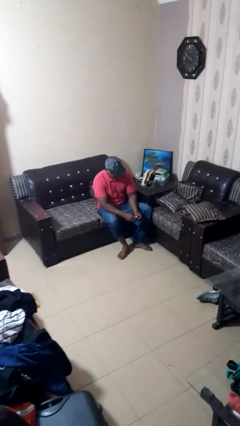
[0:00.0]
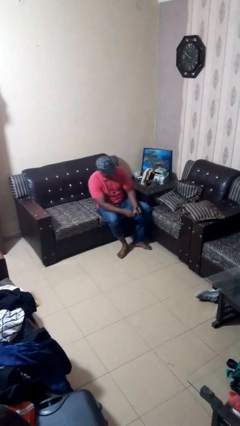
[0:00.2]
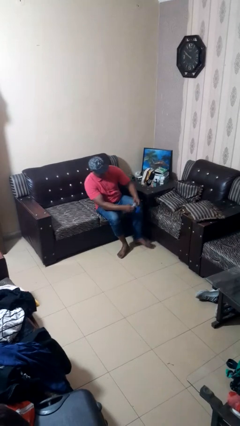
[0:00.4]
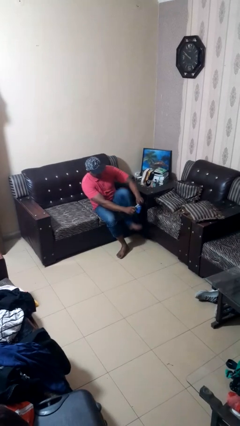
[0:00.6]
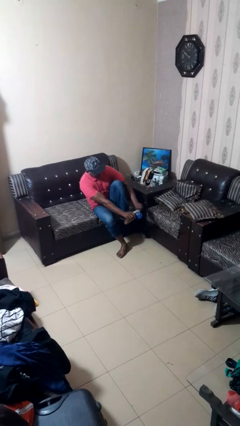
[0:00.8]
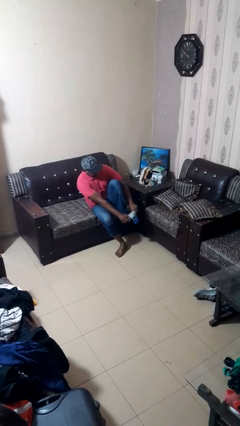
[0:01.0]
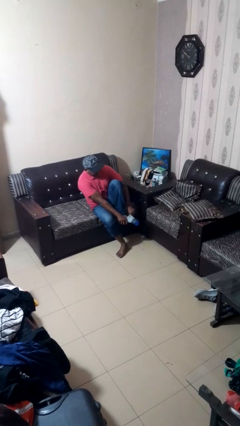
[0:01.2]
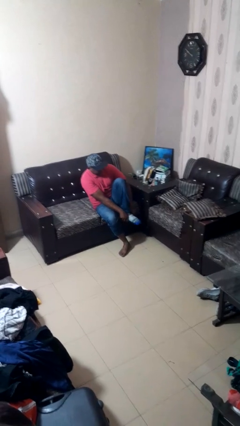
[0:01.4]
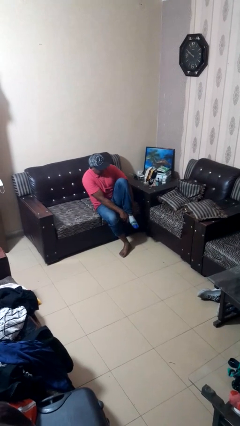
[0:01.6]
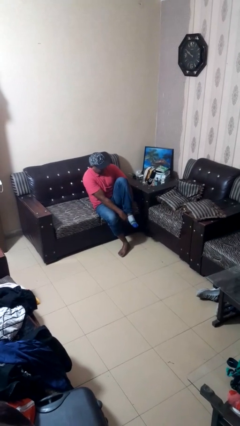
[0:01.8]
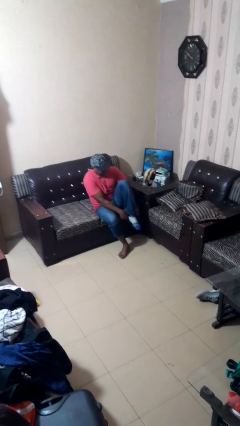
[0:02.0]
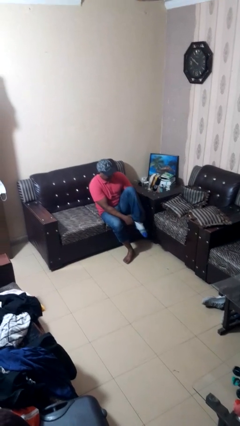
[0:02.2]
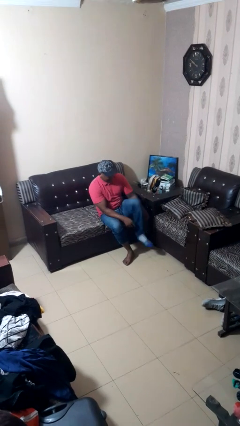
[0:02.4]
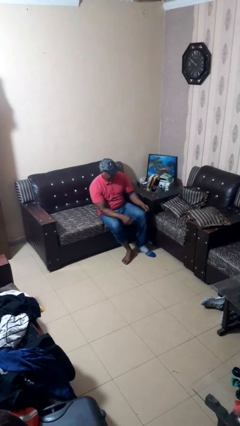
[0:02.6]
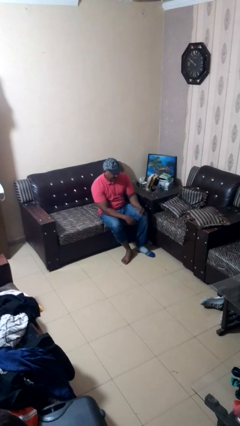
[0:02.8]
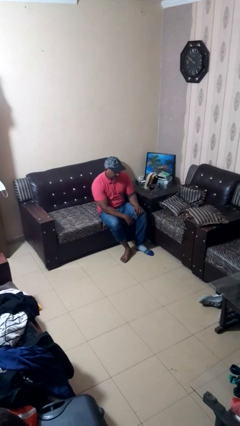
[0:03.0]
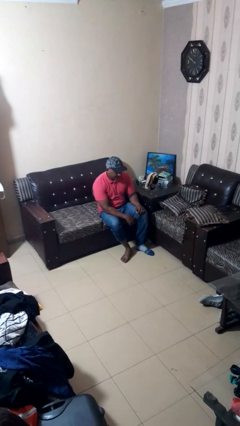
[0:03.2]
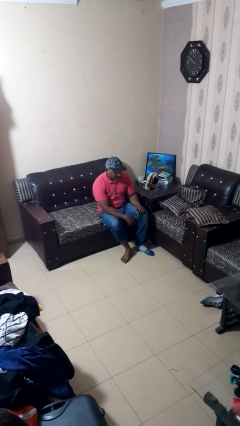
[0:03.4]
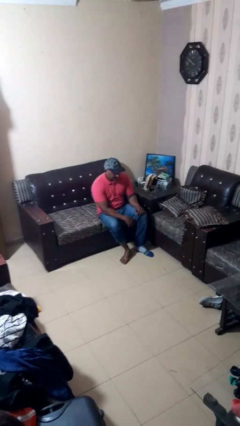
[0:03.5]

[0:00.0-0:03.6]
person puts on socks

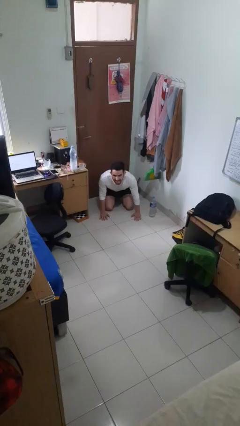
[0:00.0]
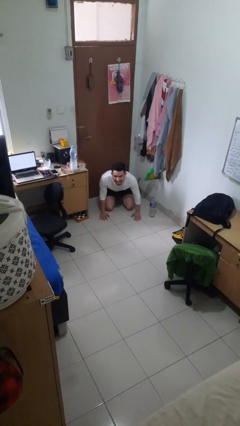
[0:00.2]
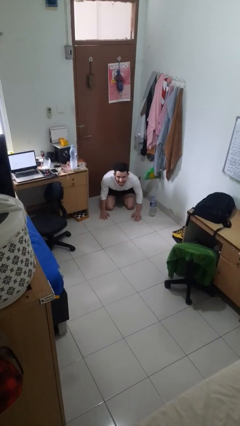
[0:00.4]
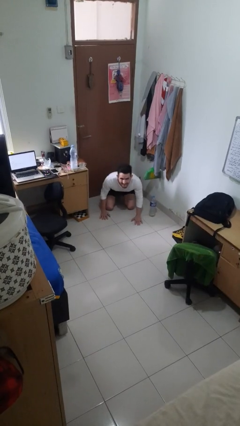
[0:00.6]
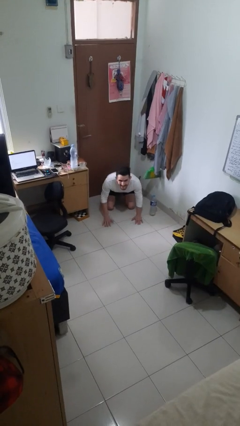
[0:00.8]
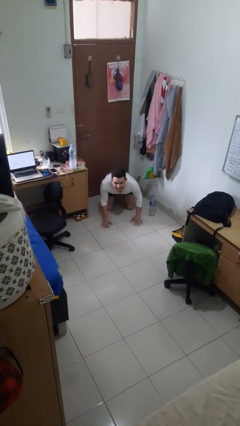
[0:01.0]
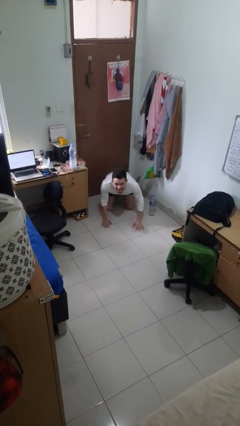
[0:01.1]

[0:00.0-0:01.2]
person crawls

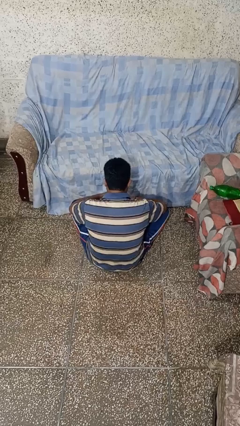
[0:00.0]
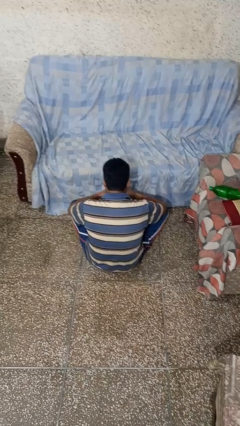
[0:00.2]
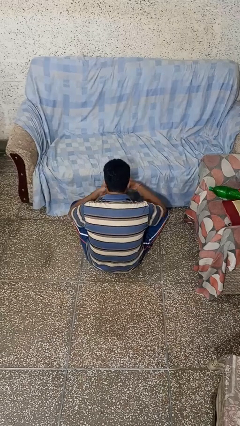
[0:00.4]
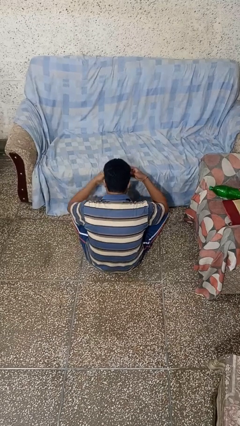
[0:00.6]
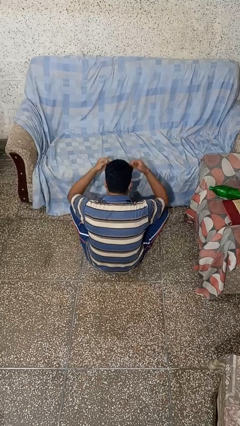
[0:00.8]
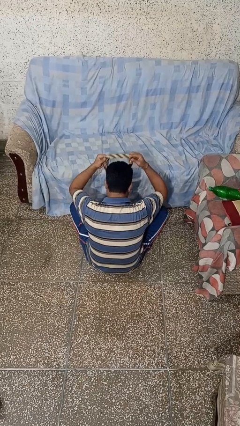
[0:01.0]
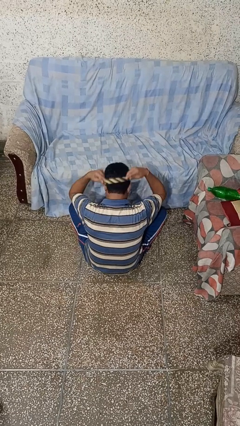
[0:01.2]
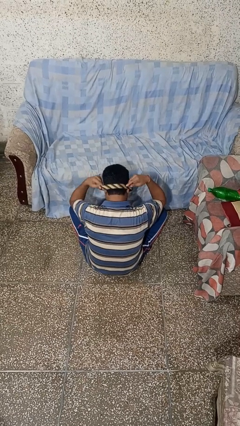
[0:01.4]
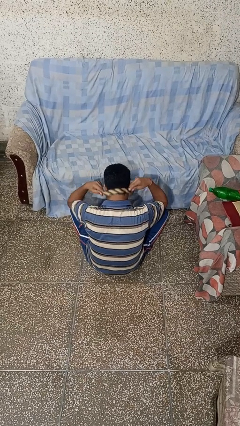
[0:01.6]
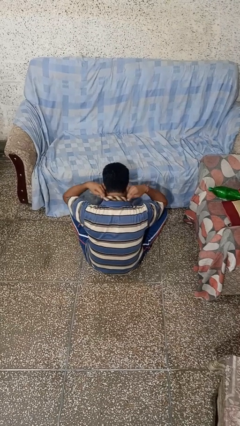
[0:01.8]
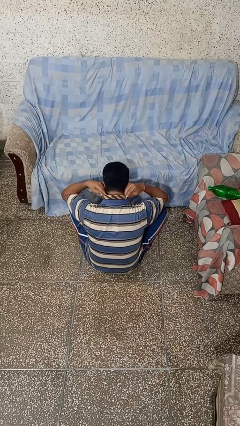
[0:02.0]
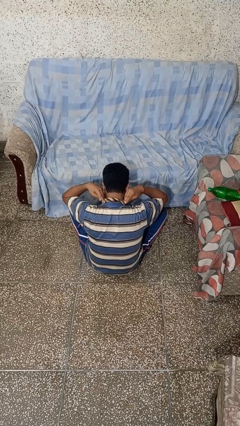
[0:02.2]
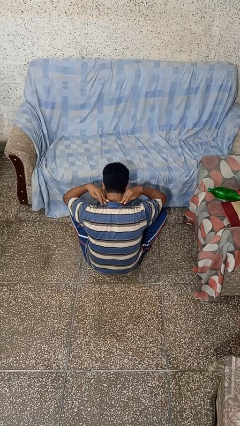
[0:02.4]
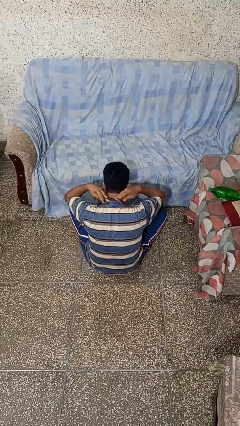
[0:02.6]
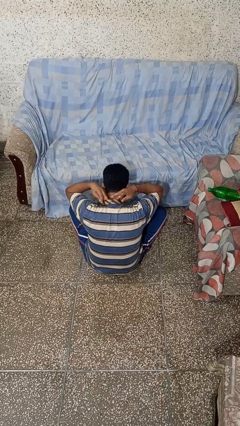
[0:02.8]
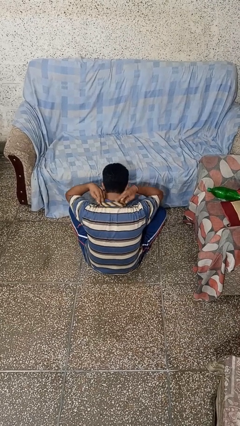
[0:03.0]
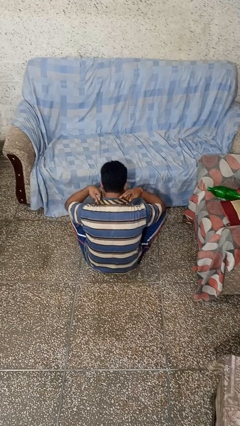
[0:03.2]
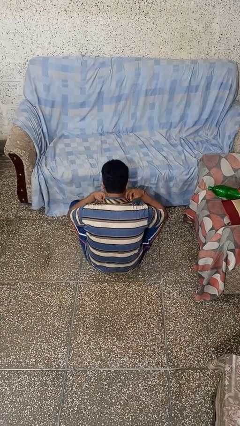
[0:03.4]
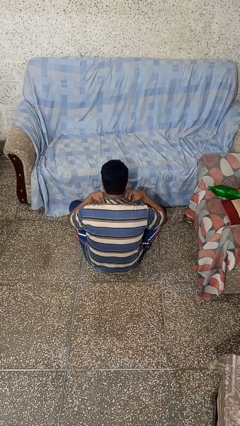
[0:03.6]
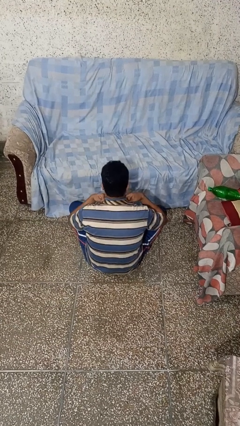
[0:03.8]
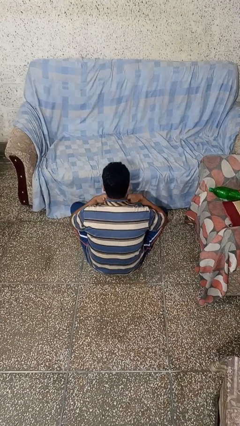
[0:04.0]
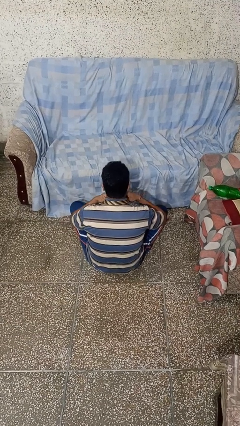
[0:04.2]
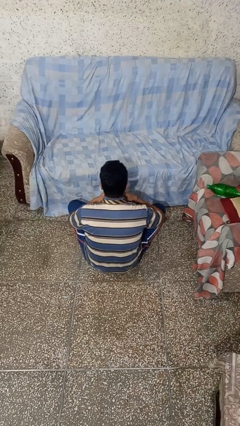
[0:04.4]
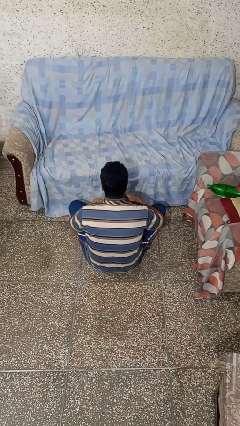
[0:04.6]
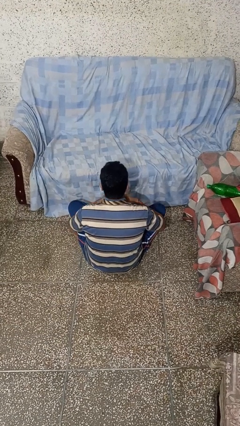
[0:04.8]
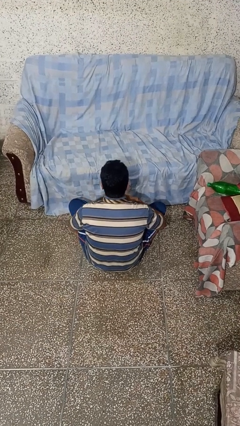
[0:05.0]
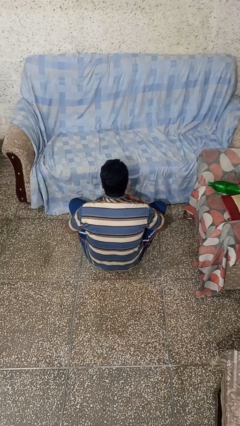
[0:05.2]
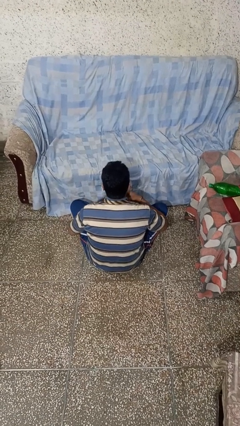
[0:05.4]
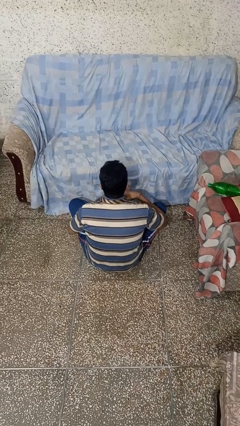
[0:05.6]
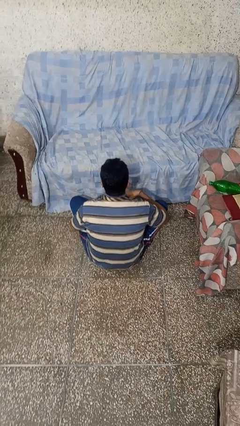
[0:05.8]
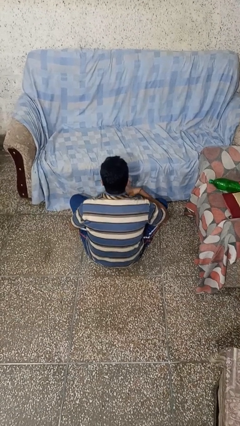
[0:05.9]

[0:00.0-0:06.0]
person puts on necktie

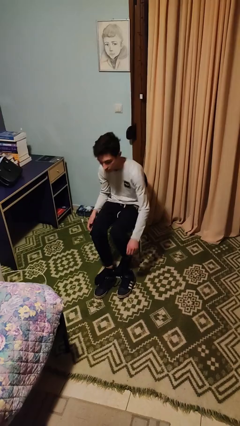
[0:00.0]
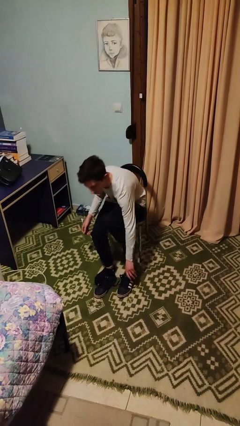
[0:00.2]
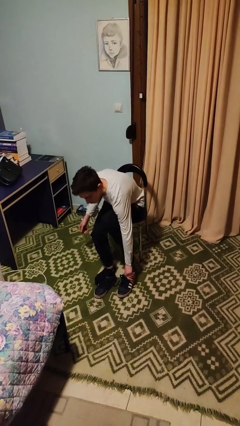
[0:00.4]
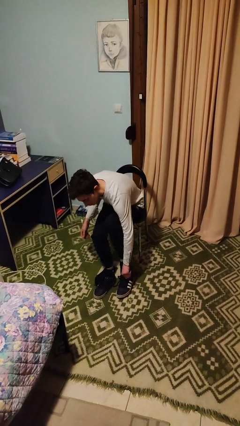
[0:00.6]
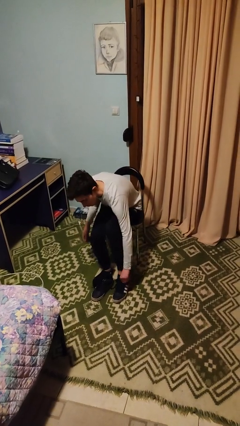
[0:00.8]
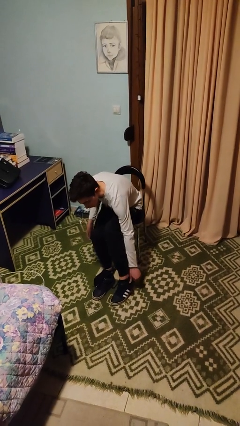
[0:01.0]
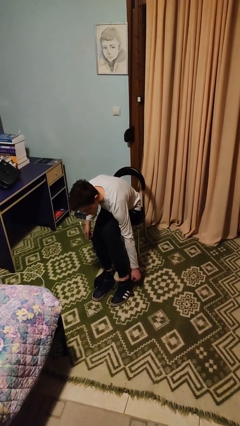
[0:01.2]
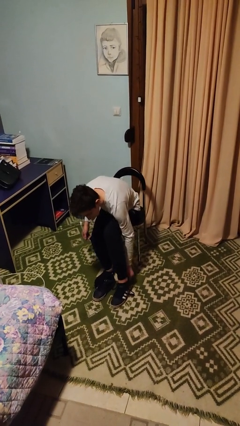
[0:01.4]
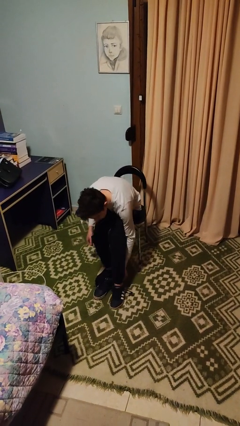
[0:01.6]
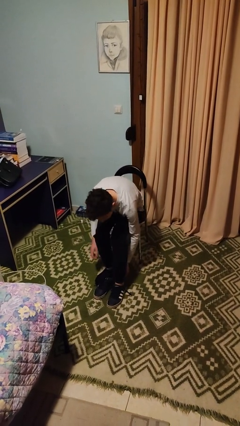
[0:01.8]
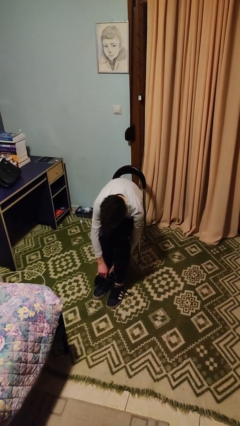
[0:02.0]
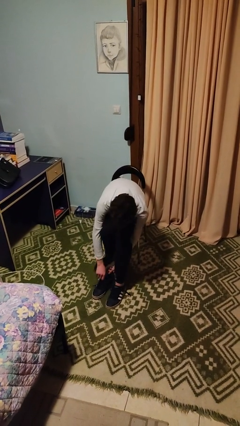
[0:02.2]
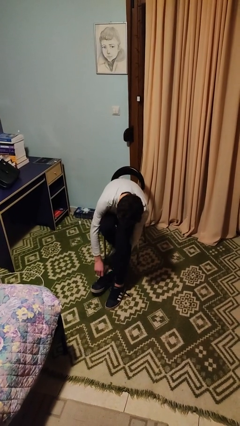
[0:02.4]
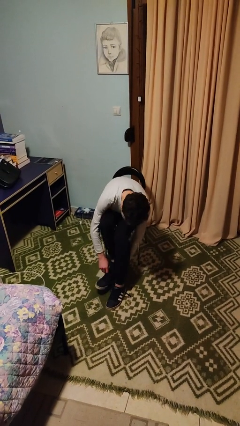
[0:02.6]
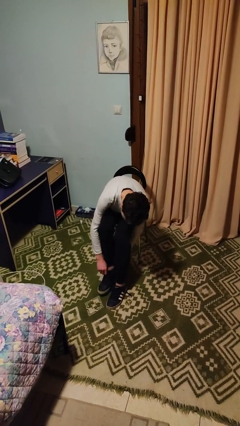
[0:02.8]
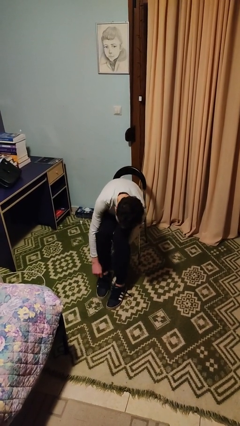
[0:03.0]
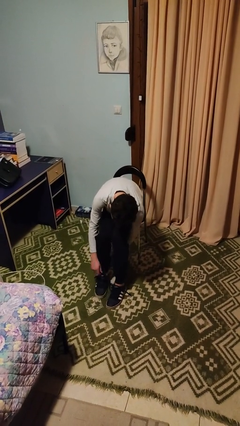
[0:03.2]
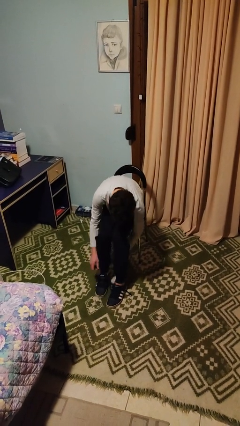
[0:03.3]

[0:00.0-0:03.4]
person puts on shoes

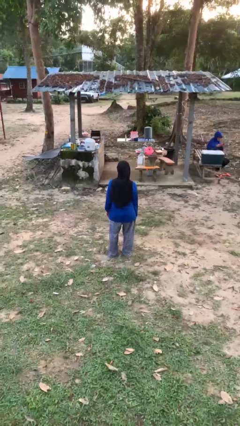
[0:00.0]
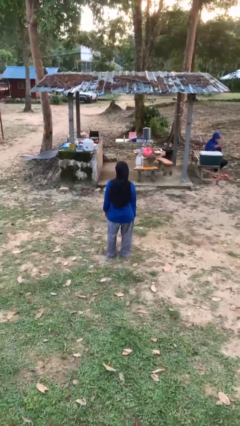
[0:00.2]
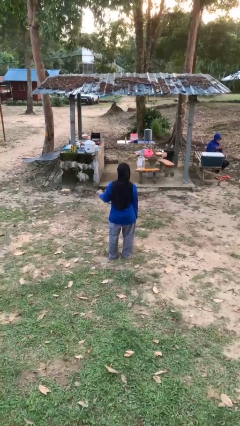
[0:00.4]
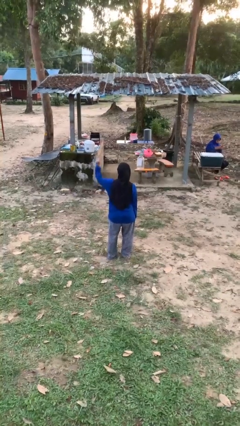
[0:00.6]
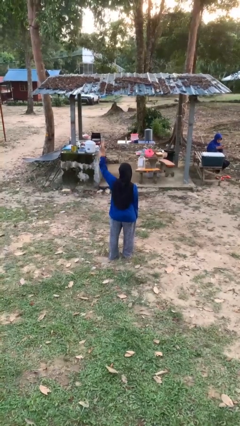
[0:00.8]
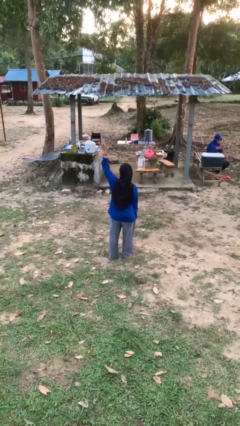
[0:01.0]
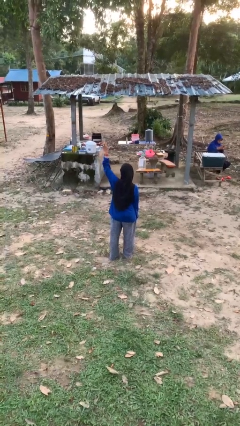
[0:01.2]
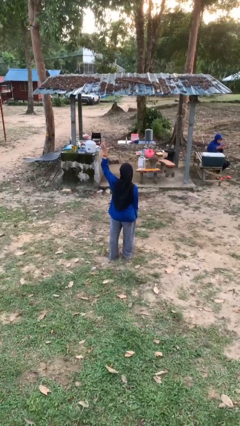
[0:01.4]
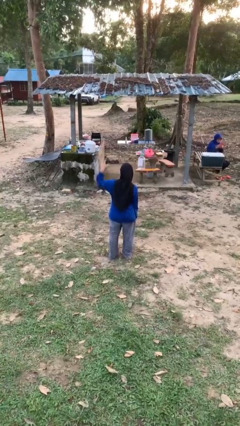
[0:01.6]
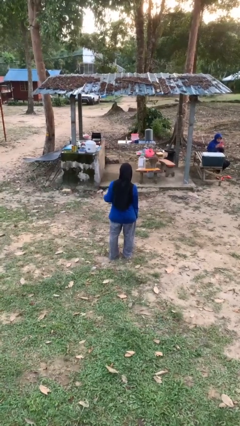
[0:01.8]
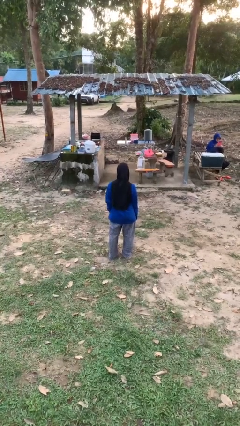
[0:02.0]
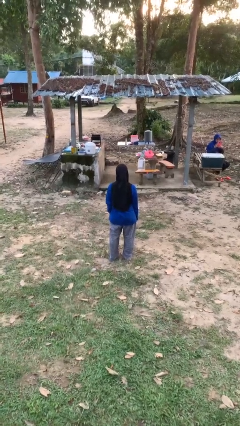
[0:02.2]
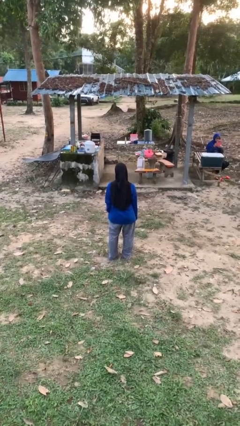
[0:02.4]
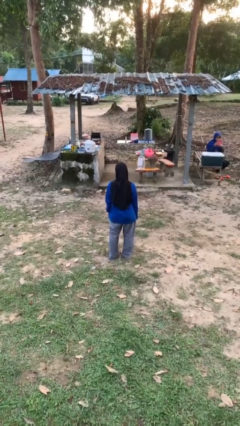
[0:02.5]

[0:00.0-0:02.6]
person gestures number five

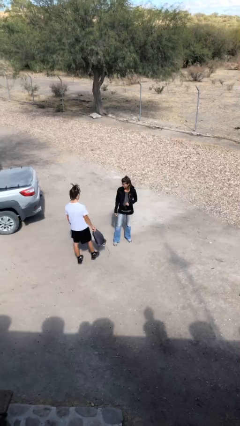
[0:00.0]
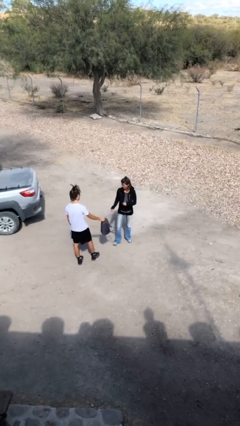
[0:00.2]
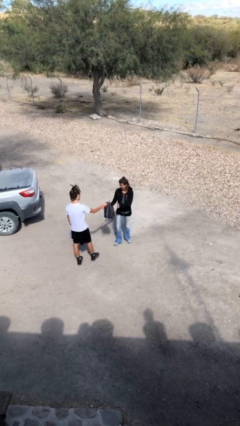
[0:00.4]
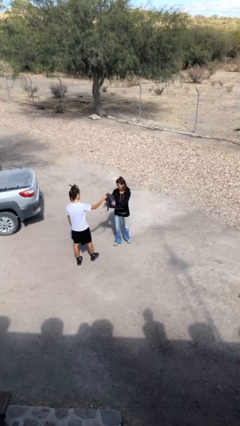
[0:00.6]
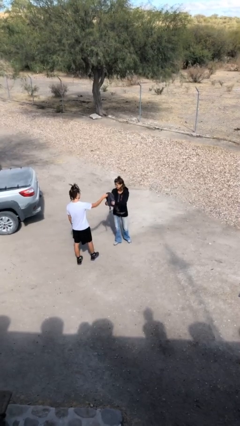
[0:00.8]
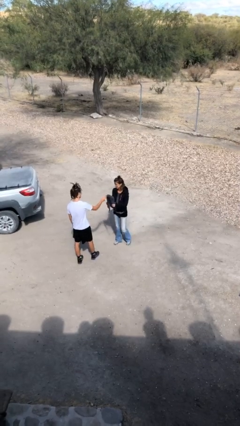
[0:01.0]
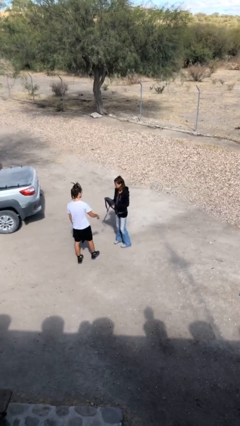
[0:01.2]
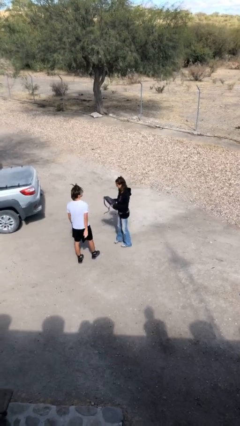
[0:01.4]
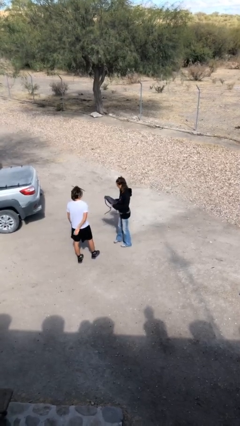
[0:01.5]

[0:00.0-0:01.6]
person transfers object to person
